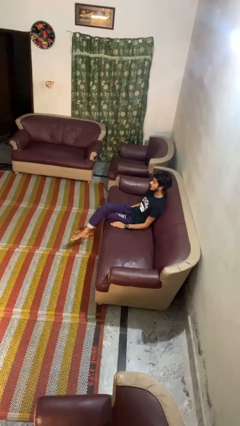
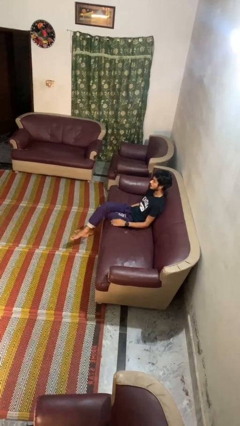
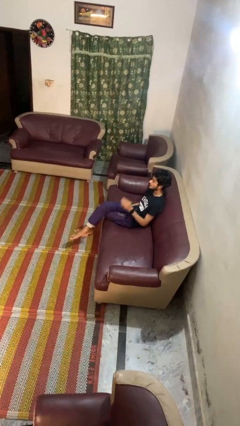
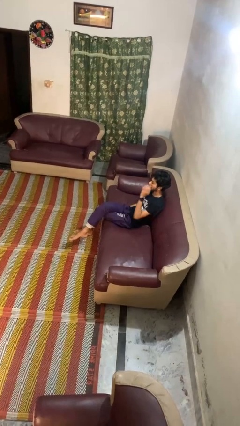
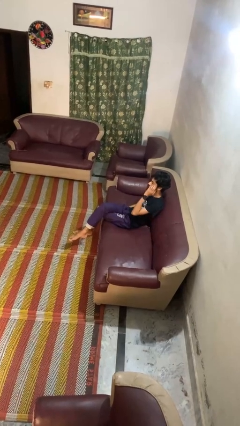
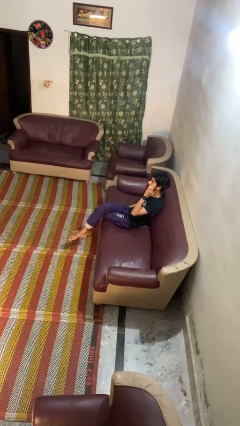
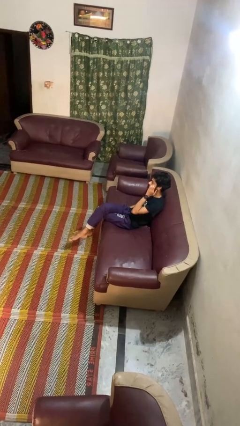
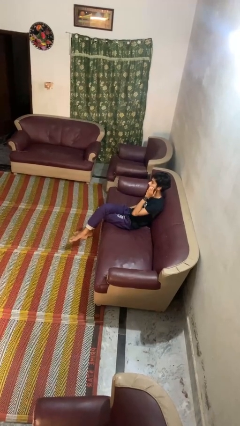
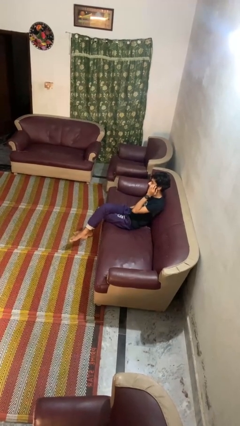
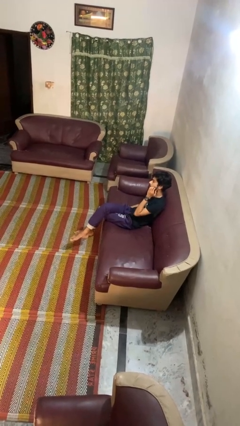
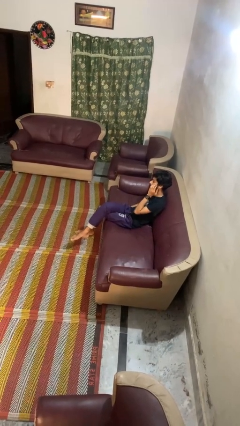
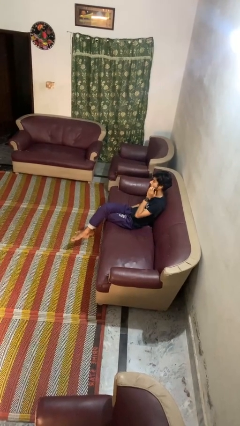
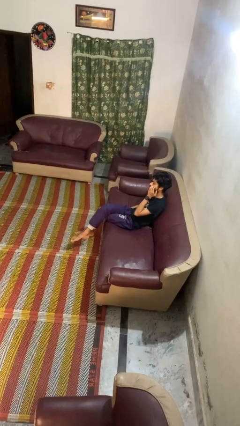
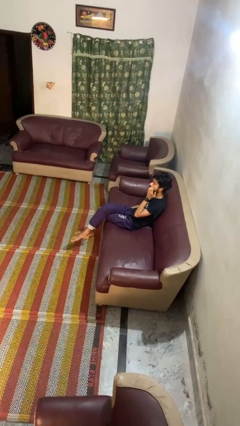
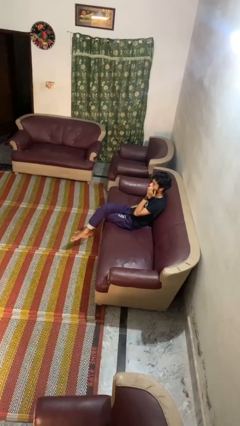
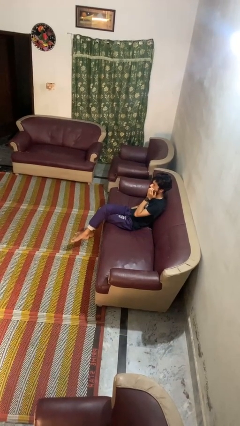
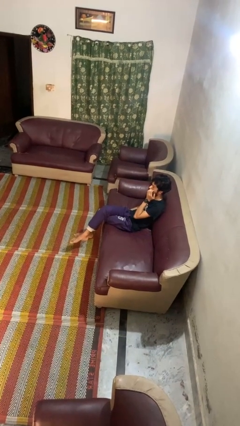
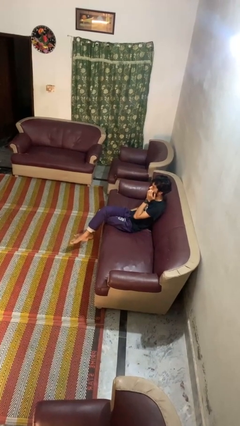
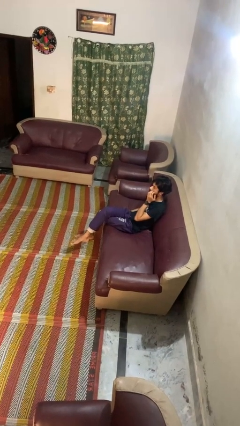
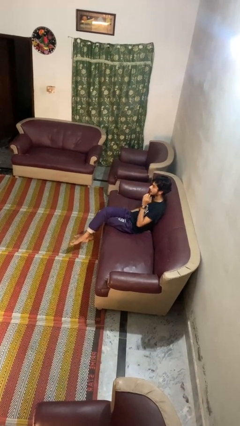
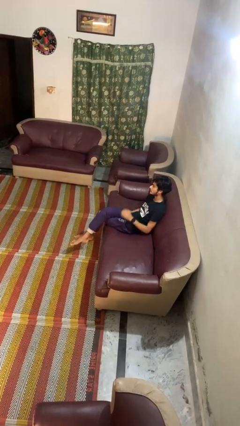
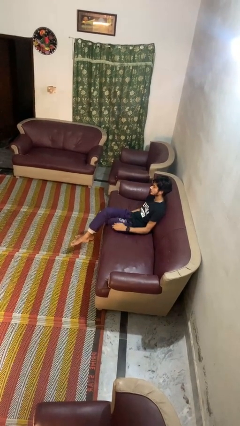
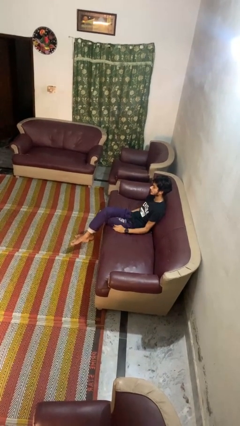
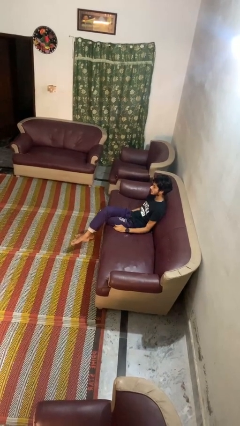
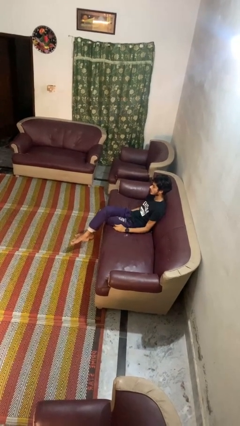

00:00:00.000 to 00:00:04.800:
person scratches face

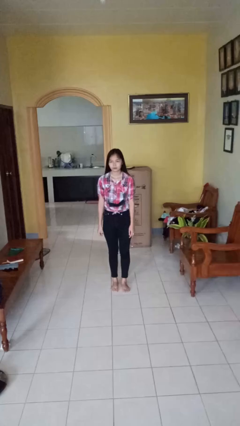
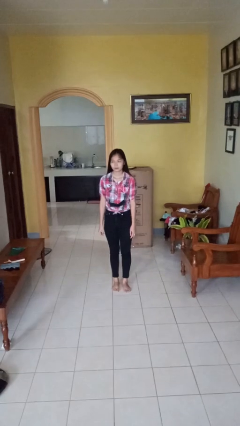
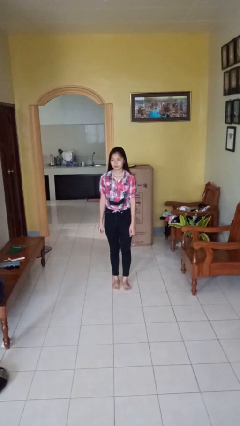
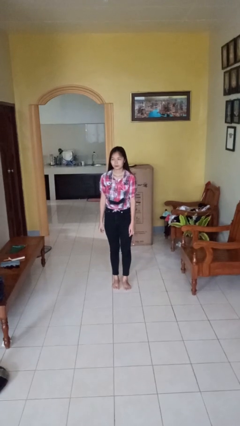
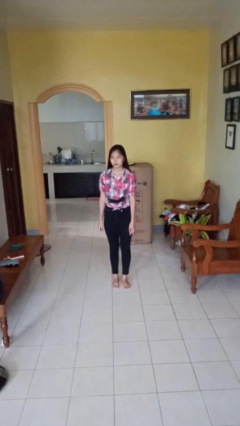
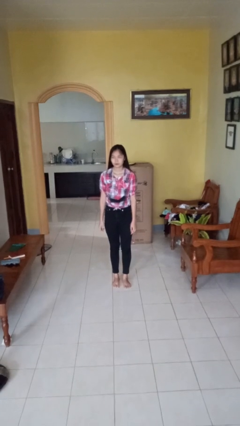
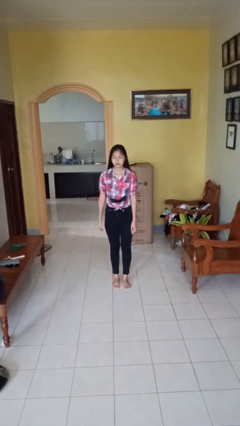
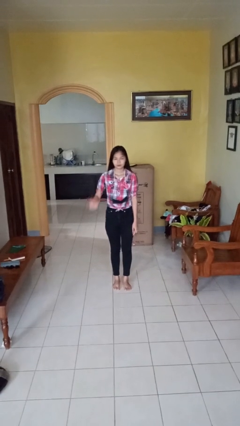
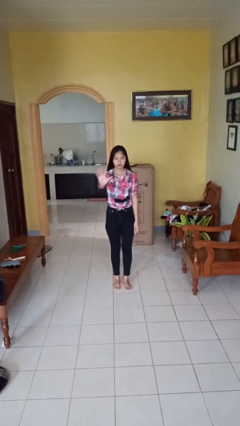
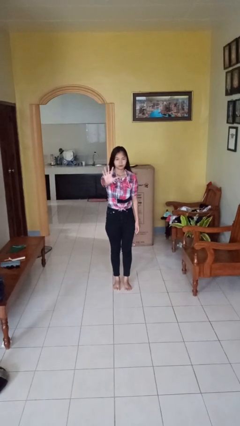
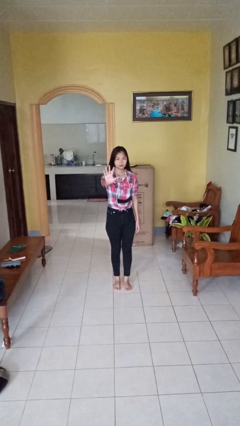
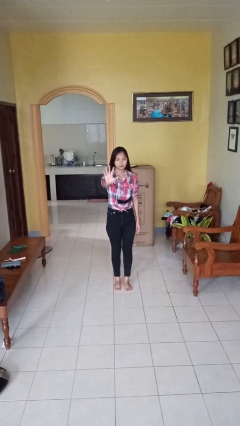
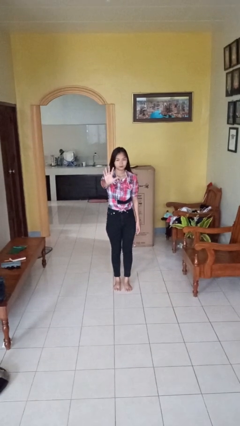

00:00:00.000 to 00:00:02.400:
person gestures number five

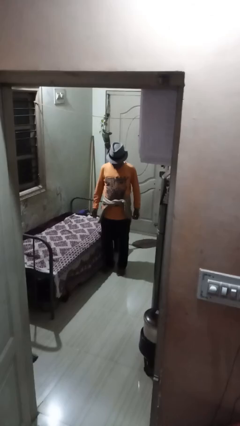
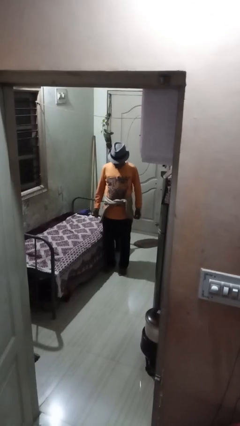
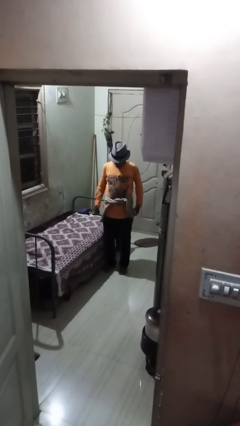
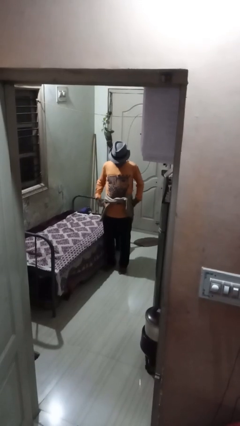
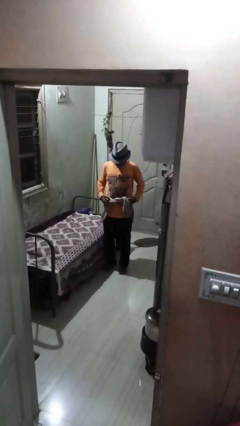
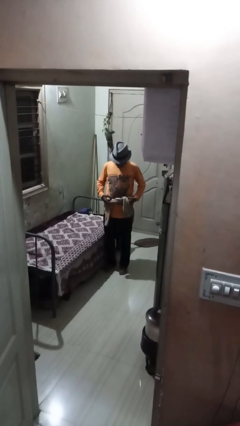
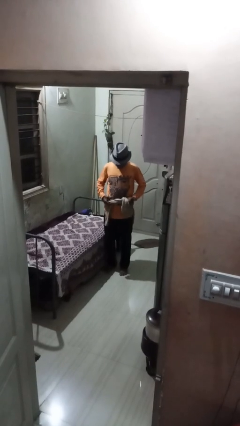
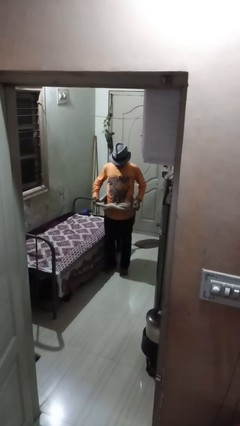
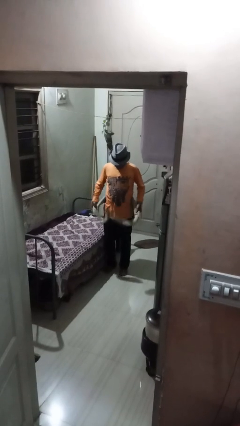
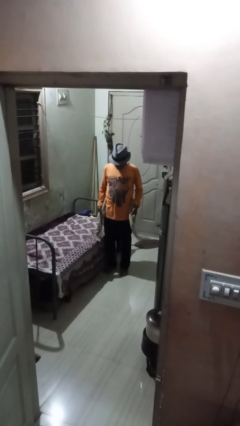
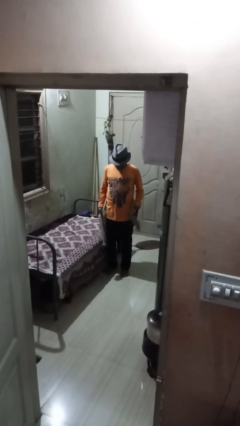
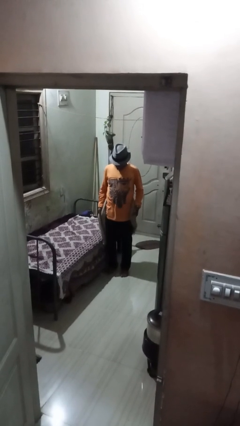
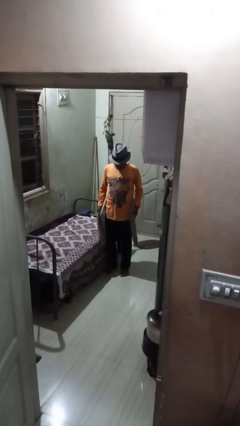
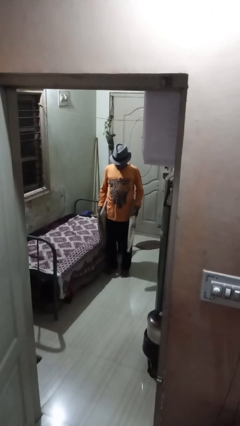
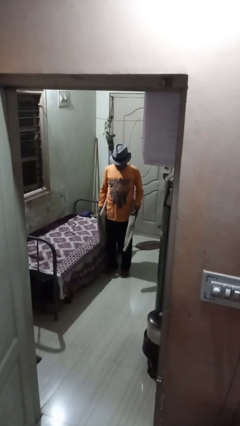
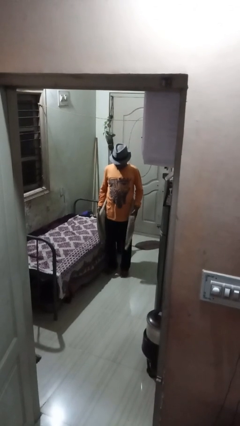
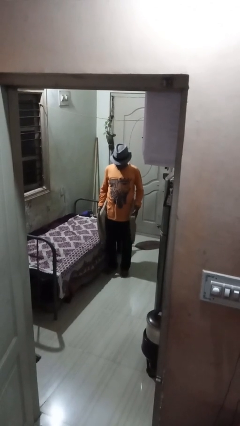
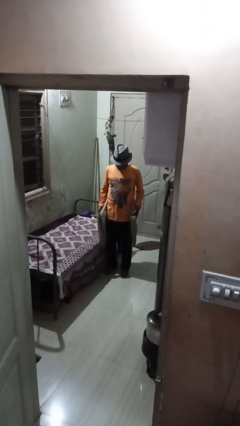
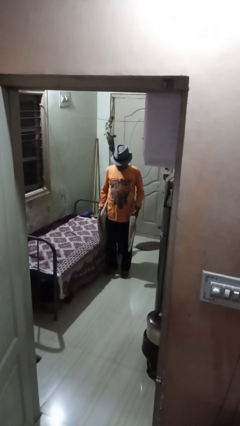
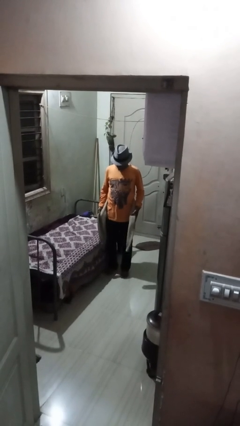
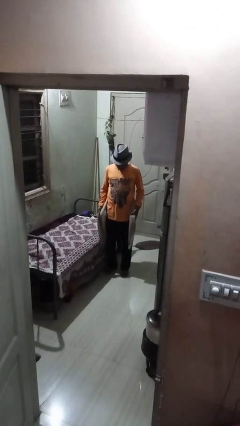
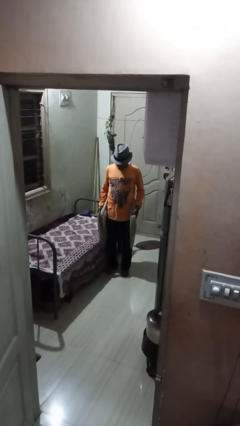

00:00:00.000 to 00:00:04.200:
person unties jacket around waist

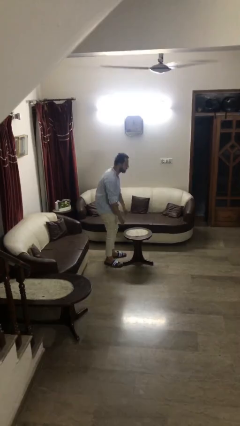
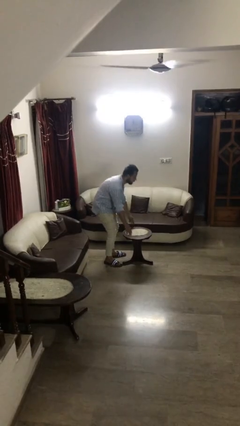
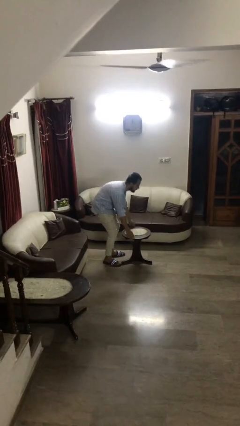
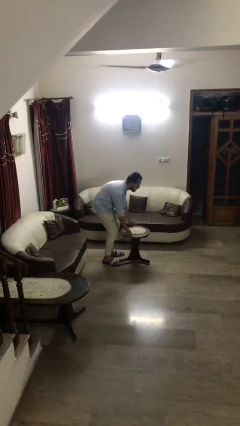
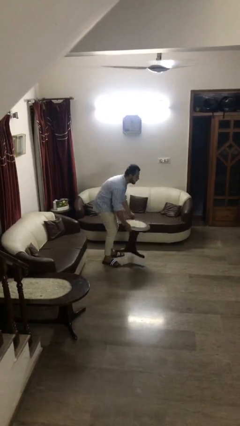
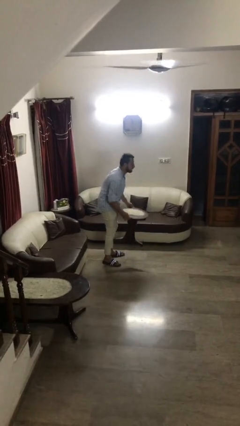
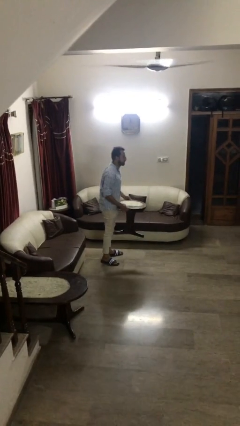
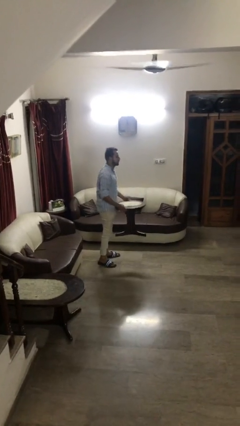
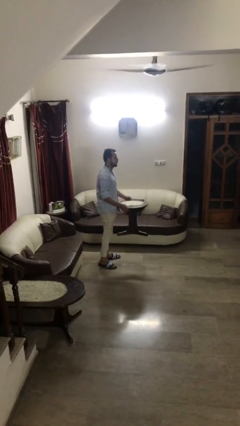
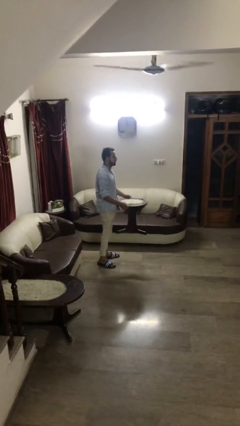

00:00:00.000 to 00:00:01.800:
person picks up object from floor

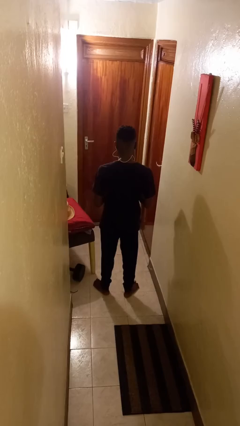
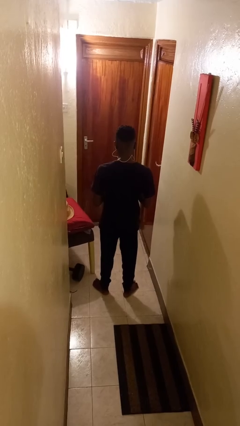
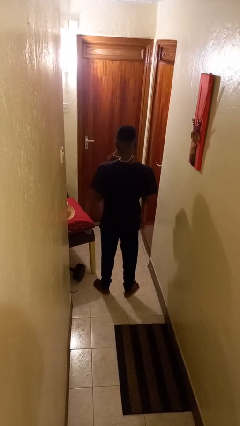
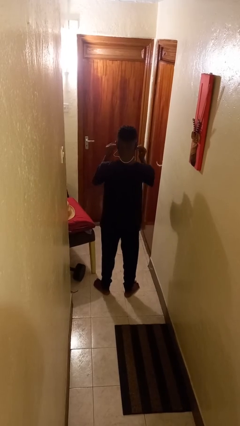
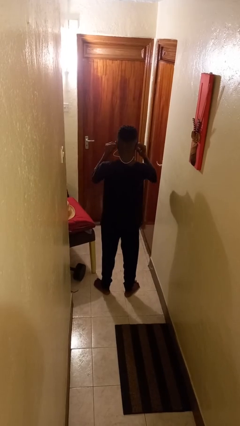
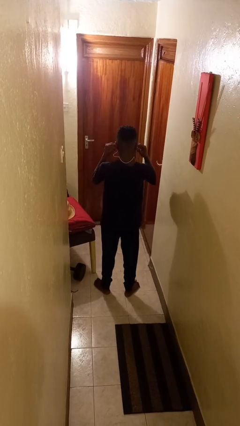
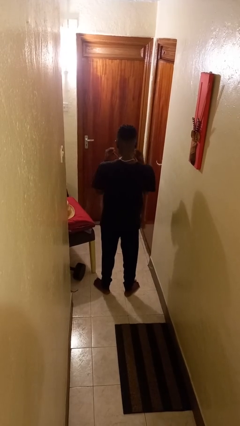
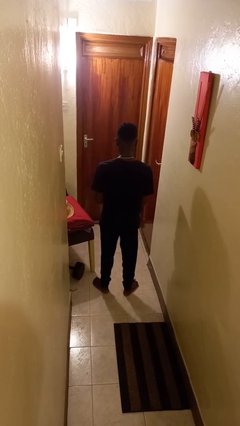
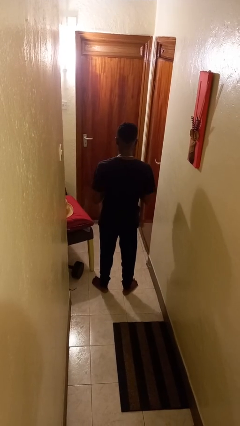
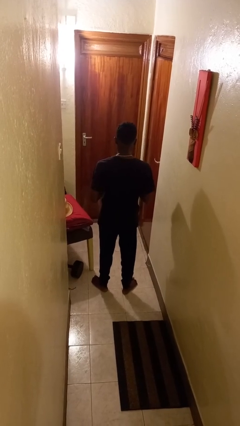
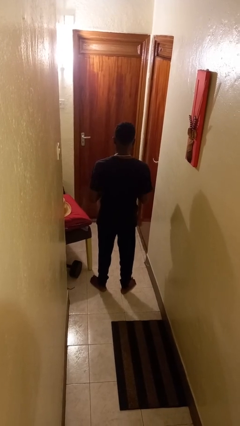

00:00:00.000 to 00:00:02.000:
person takes off headphones

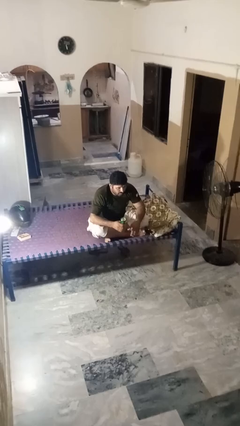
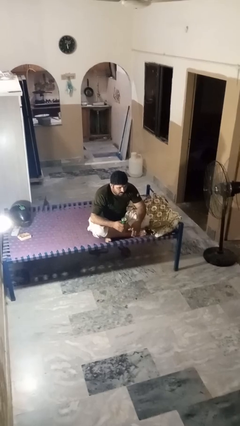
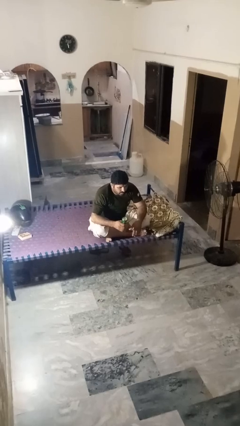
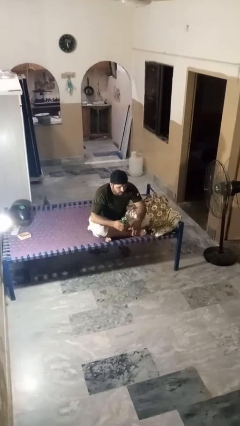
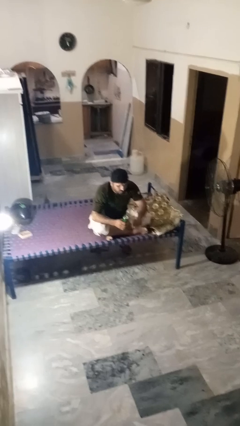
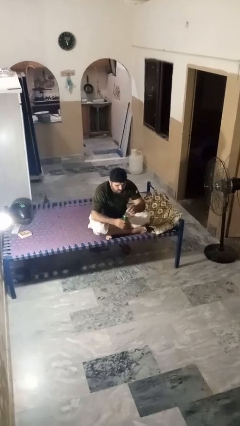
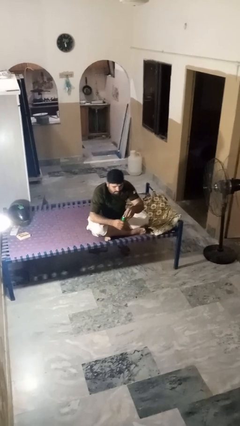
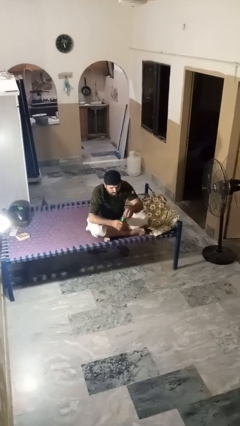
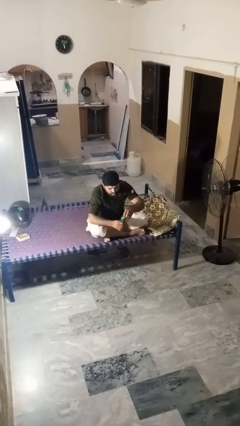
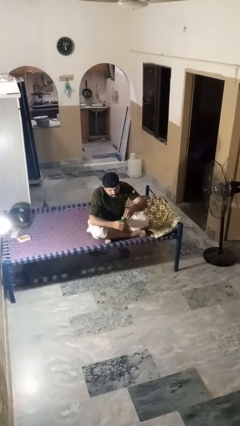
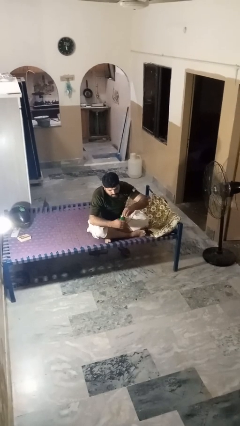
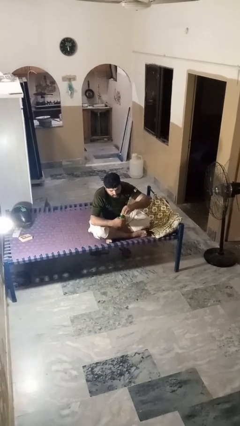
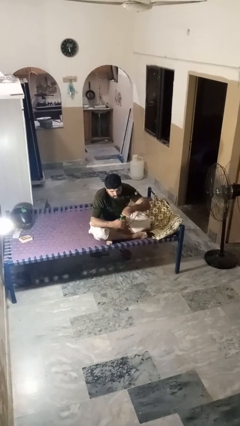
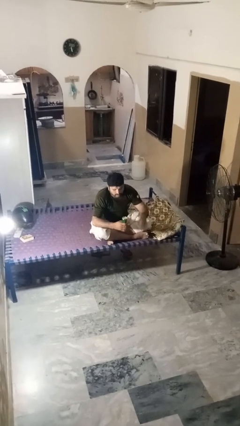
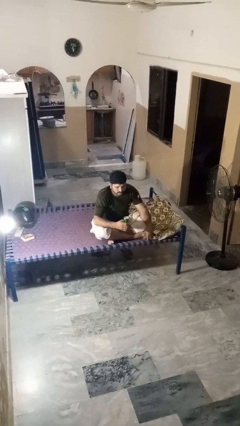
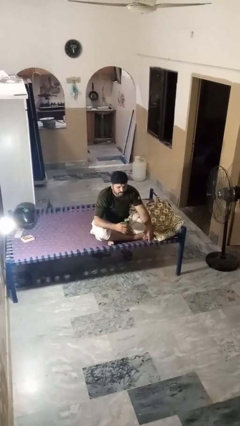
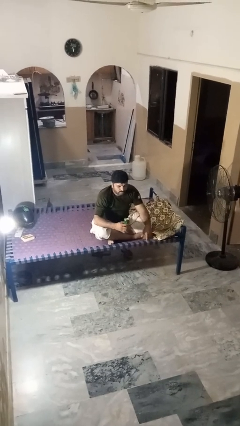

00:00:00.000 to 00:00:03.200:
person opens beverage can
